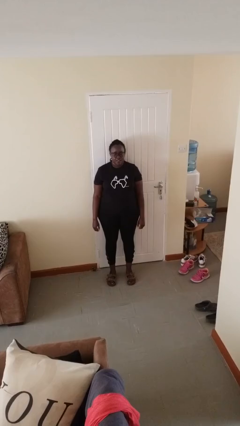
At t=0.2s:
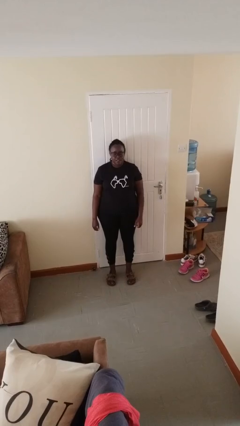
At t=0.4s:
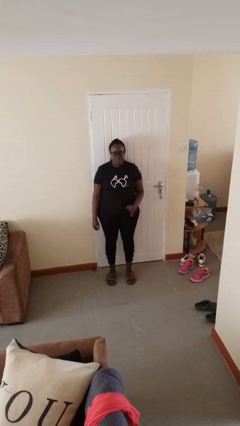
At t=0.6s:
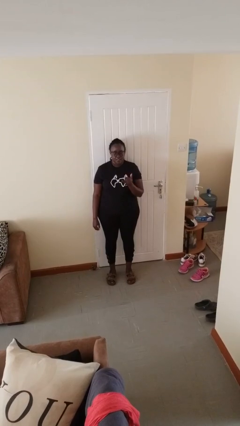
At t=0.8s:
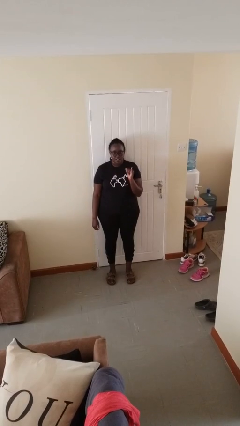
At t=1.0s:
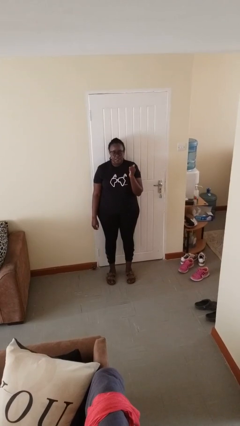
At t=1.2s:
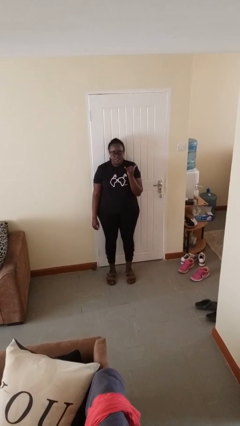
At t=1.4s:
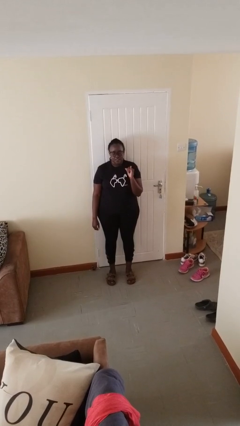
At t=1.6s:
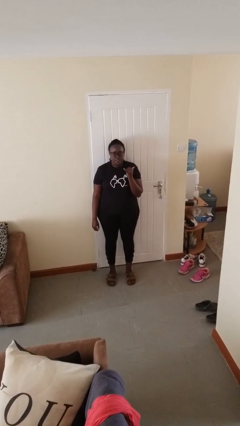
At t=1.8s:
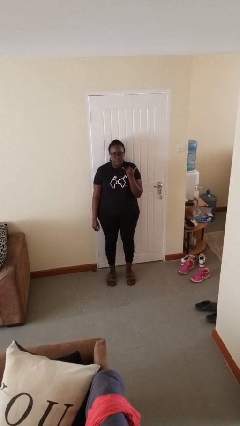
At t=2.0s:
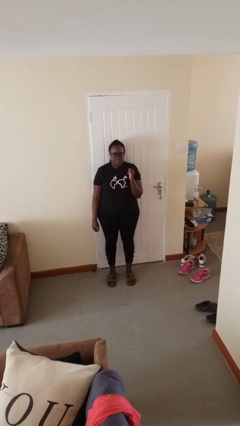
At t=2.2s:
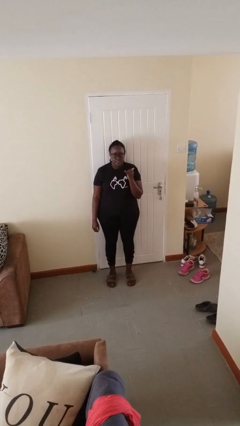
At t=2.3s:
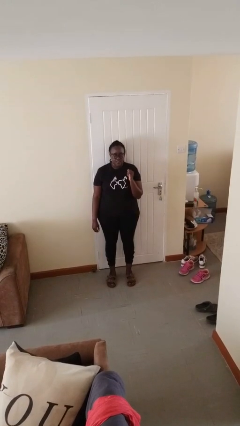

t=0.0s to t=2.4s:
person gestures hang loose

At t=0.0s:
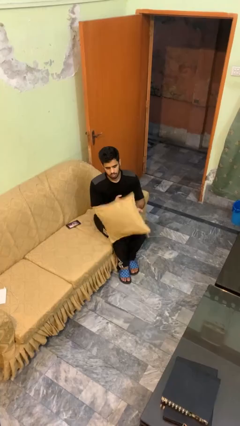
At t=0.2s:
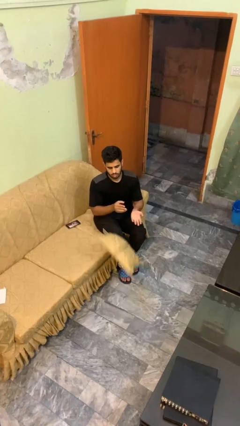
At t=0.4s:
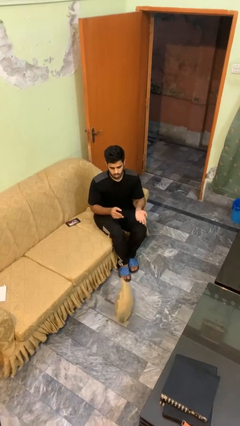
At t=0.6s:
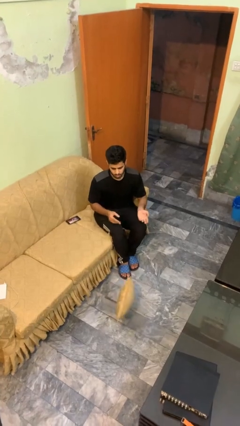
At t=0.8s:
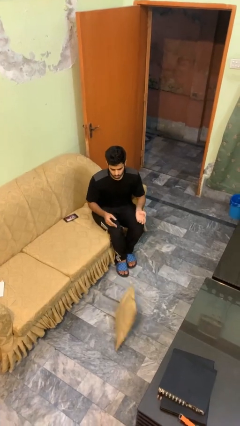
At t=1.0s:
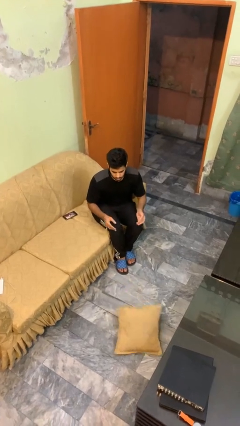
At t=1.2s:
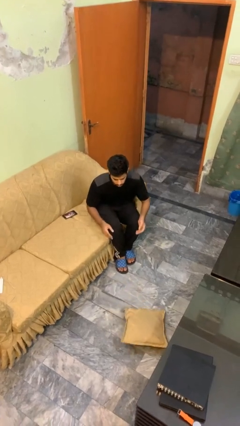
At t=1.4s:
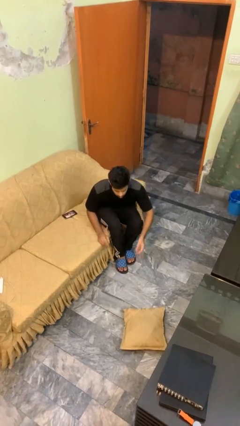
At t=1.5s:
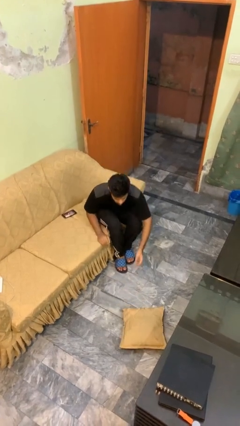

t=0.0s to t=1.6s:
person drops object

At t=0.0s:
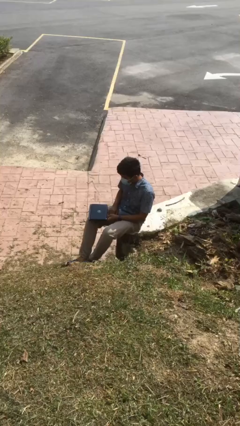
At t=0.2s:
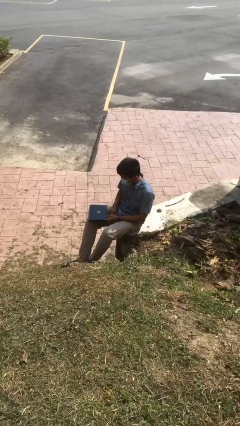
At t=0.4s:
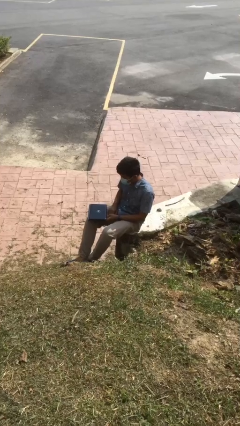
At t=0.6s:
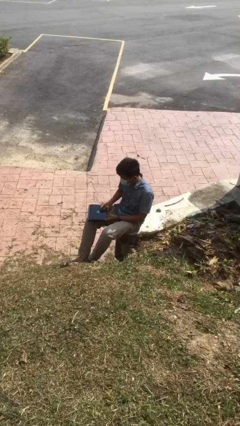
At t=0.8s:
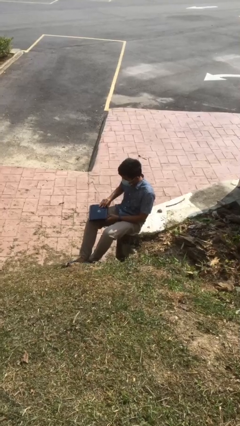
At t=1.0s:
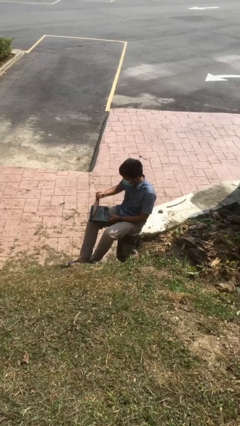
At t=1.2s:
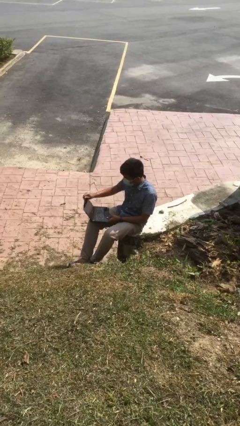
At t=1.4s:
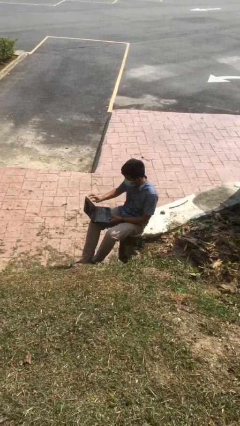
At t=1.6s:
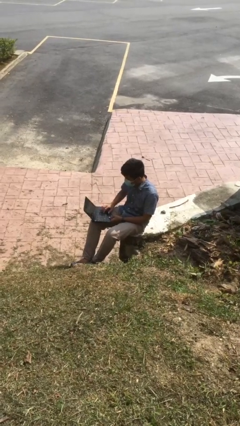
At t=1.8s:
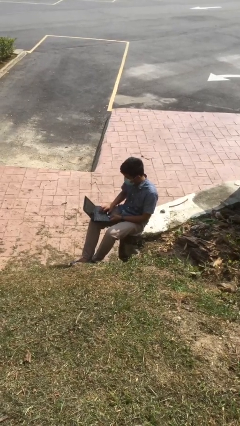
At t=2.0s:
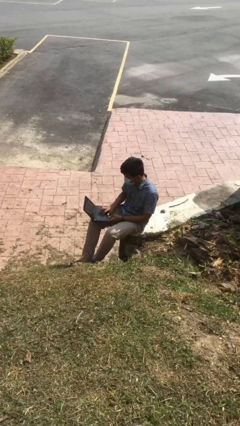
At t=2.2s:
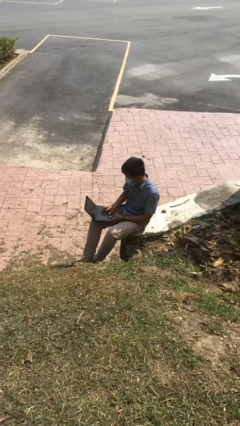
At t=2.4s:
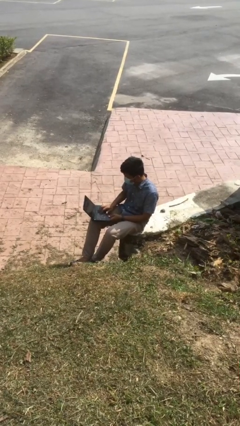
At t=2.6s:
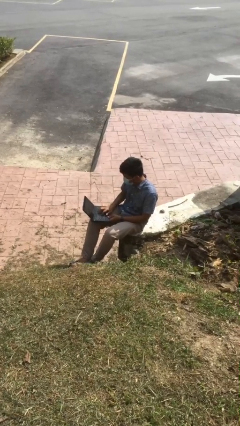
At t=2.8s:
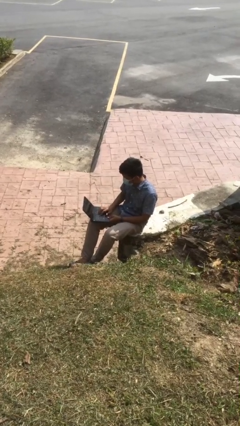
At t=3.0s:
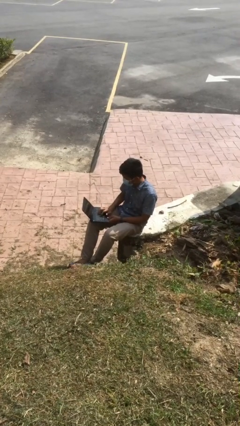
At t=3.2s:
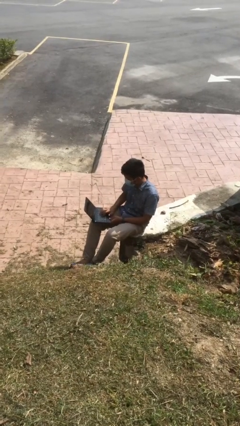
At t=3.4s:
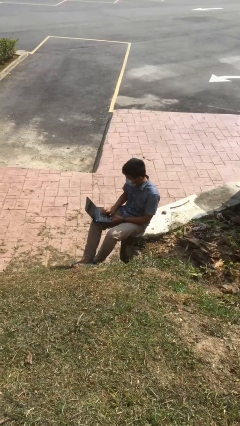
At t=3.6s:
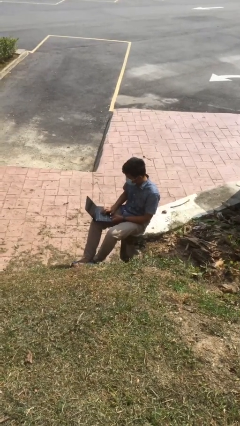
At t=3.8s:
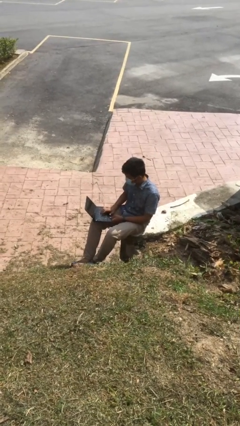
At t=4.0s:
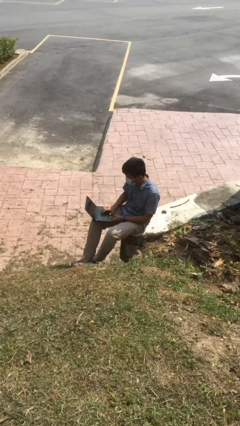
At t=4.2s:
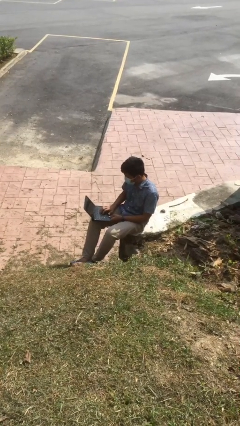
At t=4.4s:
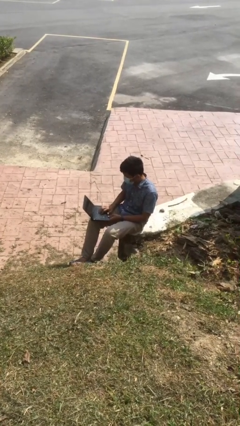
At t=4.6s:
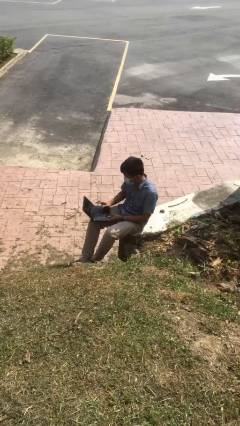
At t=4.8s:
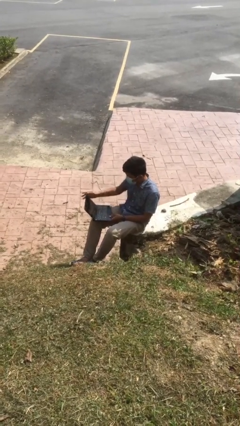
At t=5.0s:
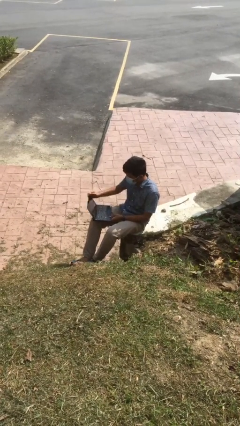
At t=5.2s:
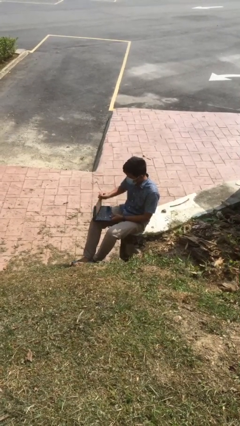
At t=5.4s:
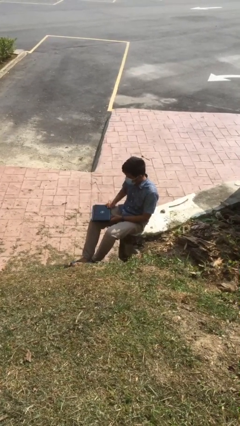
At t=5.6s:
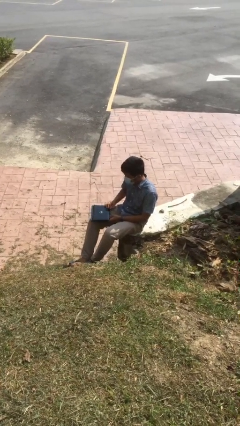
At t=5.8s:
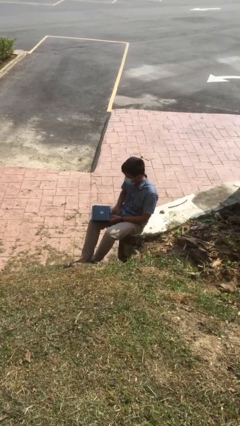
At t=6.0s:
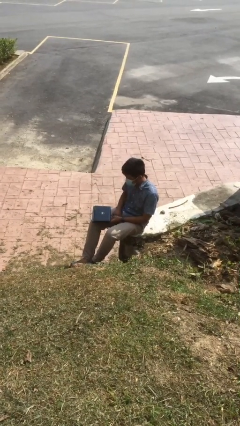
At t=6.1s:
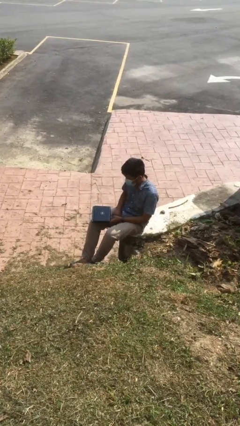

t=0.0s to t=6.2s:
person interacts with laptop

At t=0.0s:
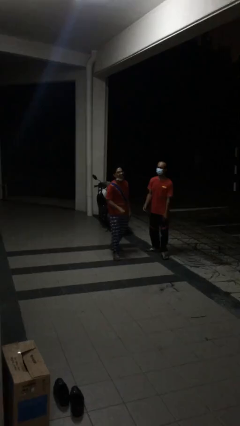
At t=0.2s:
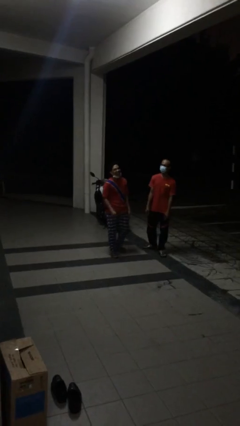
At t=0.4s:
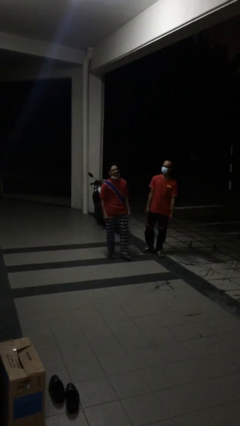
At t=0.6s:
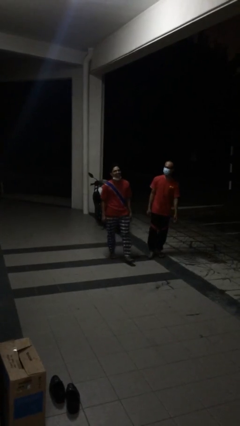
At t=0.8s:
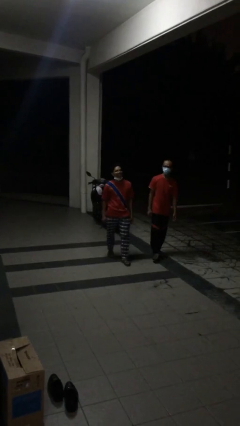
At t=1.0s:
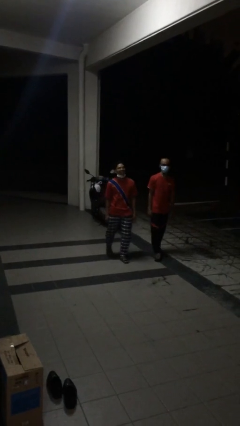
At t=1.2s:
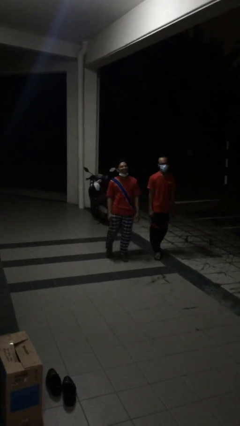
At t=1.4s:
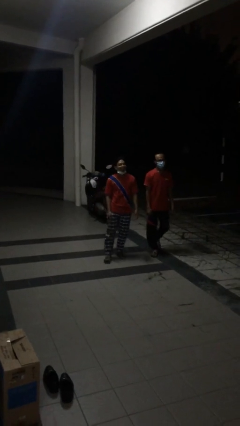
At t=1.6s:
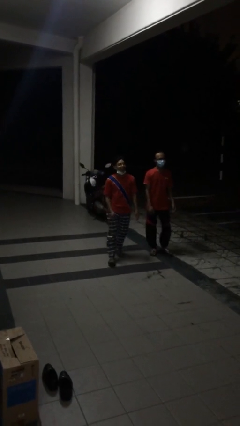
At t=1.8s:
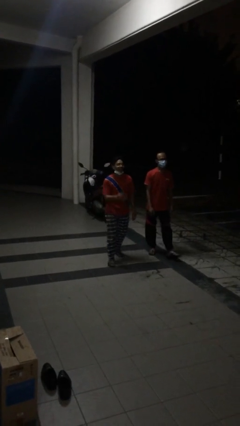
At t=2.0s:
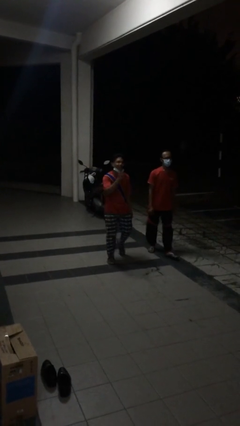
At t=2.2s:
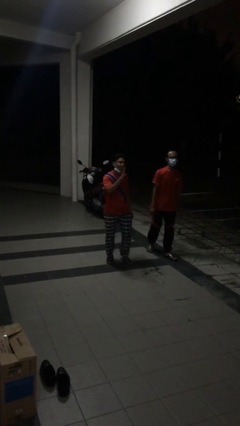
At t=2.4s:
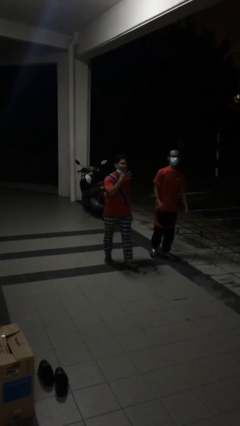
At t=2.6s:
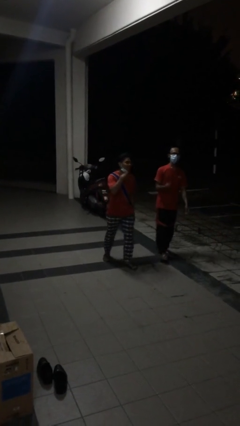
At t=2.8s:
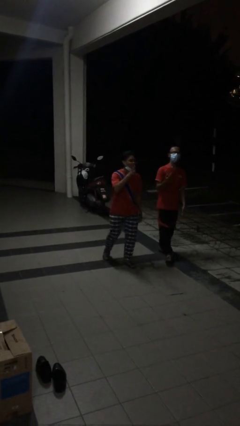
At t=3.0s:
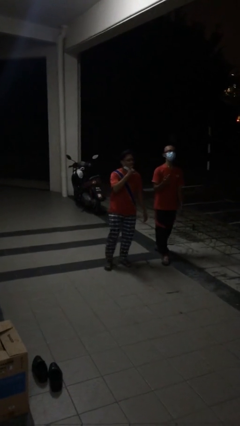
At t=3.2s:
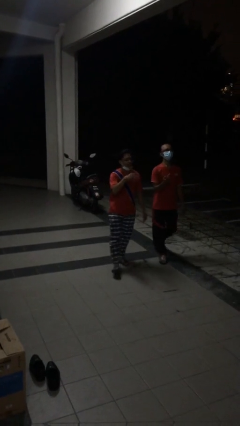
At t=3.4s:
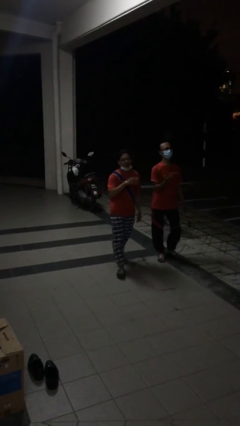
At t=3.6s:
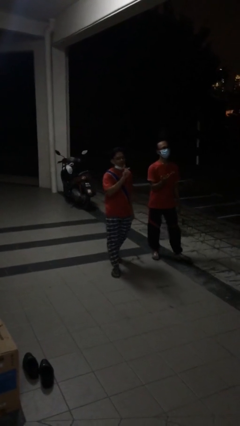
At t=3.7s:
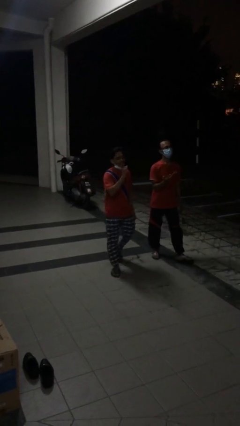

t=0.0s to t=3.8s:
person talks to person

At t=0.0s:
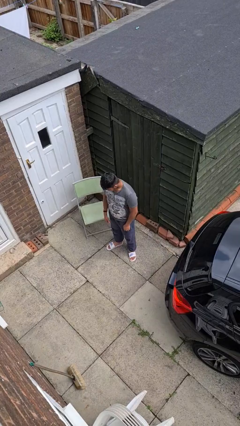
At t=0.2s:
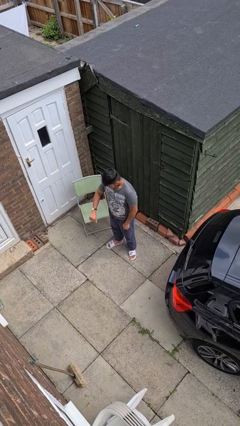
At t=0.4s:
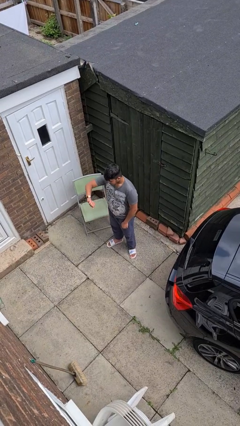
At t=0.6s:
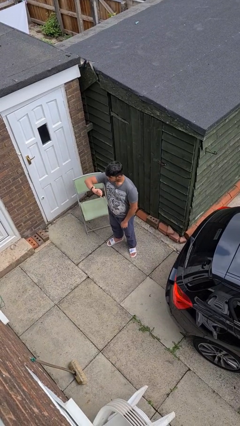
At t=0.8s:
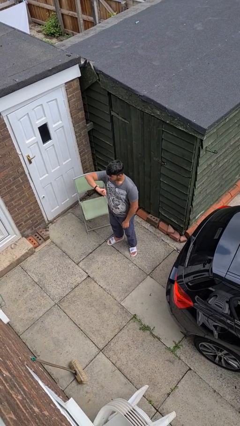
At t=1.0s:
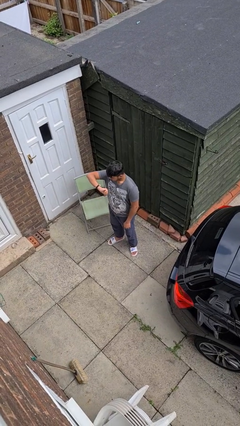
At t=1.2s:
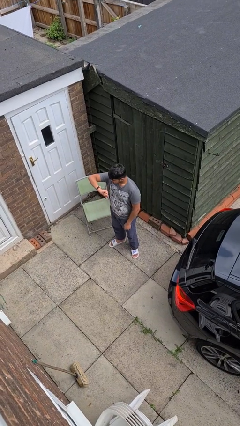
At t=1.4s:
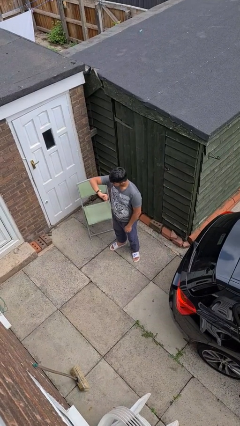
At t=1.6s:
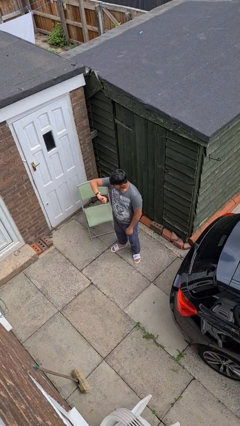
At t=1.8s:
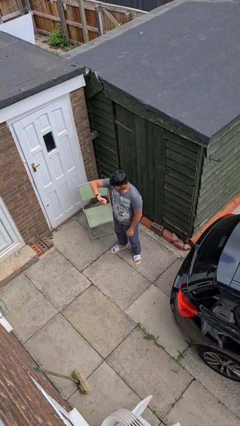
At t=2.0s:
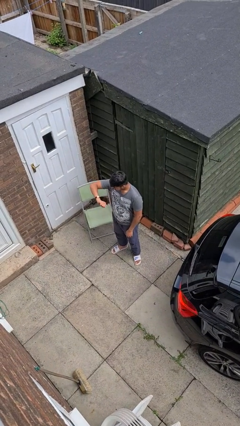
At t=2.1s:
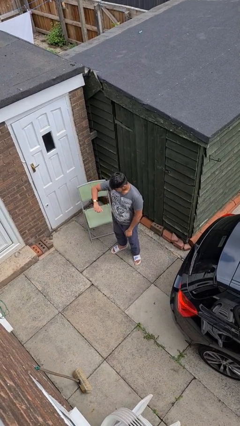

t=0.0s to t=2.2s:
person looks at wristwatch

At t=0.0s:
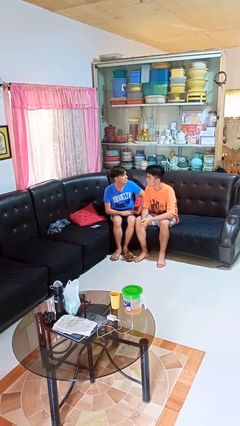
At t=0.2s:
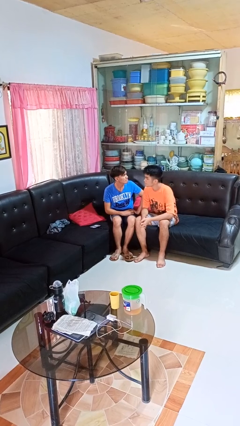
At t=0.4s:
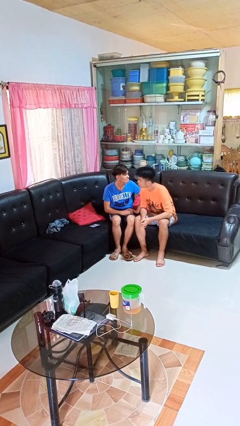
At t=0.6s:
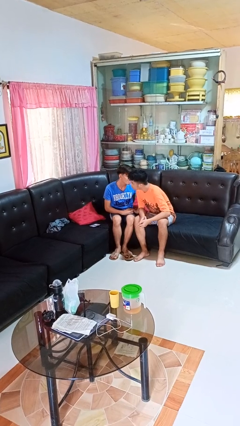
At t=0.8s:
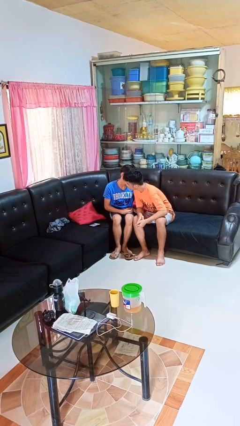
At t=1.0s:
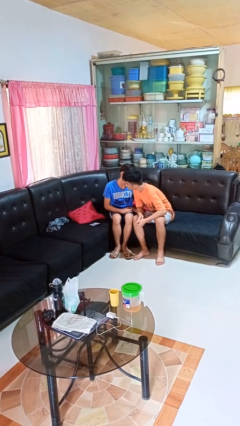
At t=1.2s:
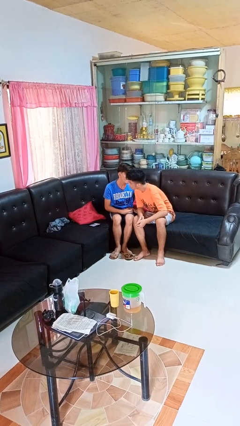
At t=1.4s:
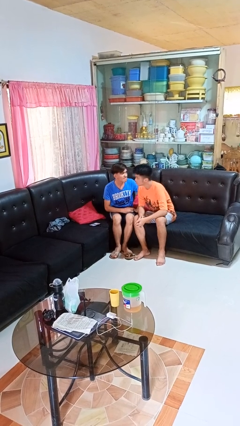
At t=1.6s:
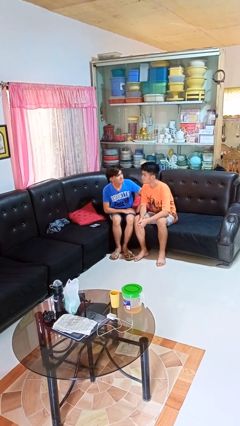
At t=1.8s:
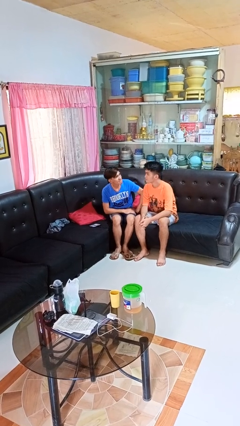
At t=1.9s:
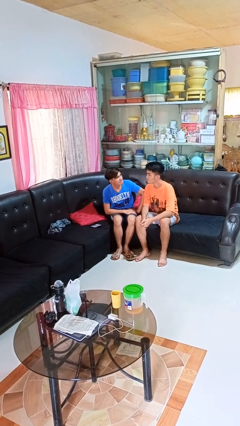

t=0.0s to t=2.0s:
person kisses cheek of person
